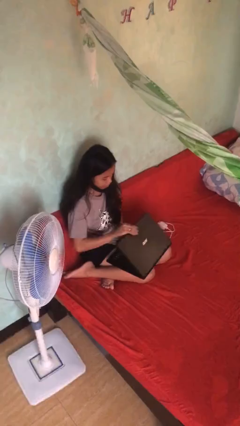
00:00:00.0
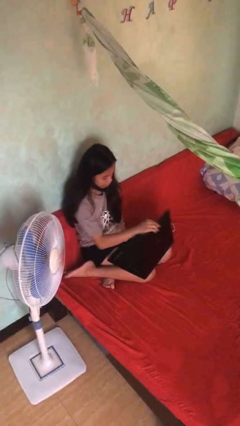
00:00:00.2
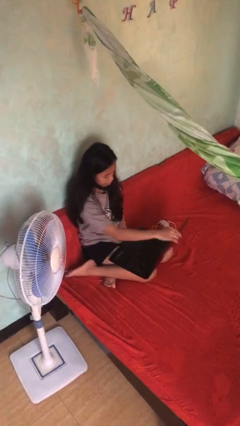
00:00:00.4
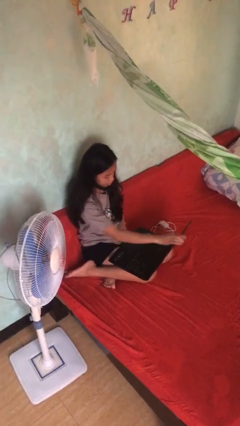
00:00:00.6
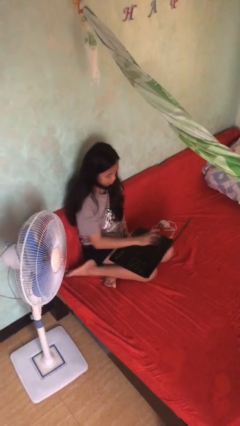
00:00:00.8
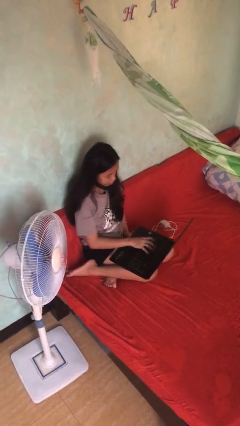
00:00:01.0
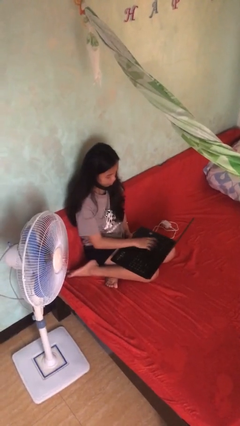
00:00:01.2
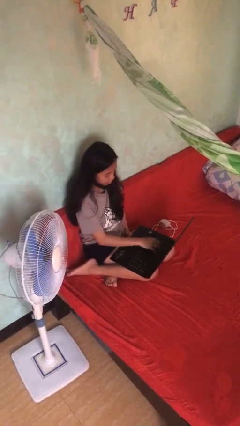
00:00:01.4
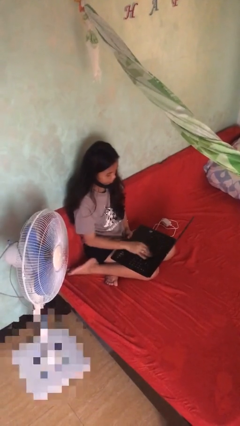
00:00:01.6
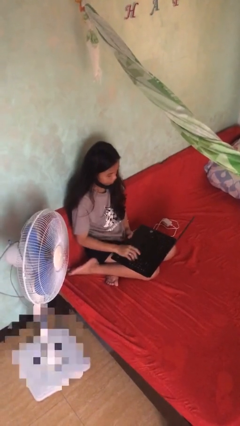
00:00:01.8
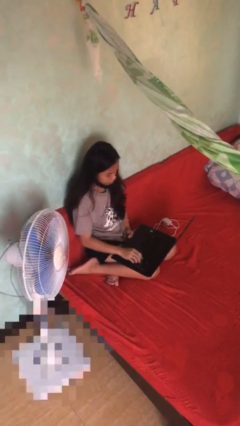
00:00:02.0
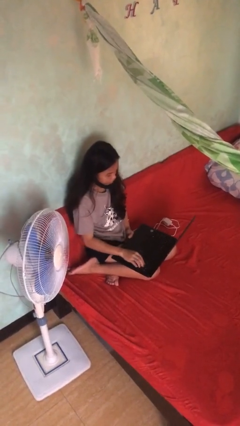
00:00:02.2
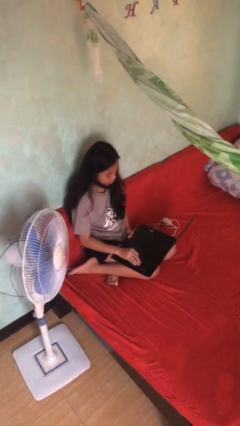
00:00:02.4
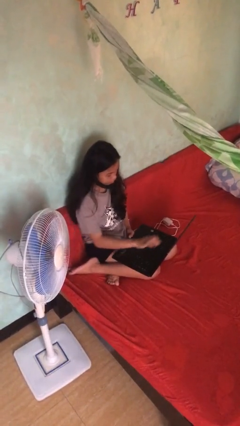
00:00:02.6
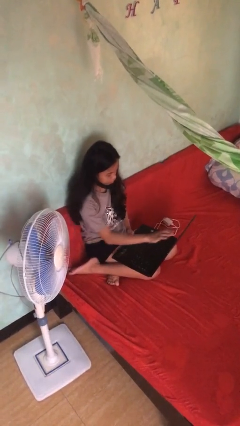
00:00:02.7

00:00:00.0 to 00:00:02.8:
person interacts with laptop

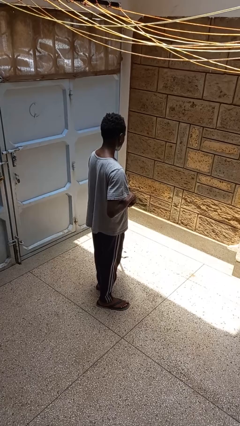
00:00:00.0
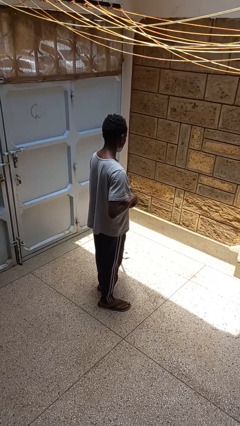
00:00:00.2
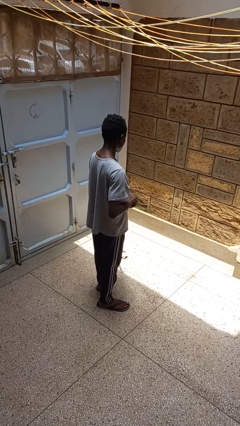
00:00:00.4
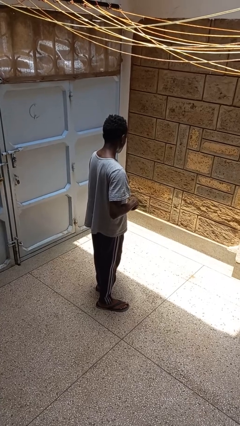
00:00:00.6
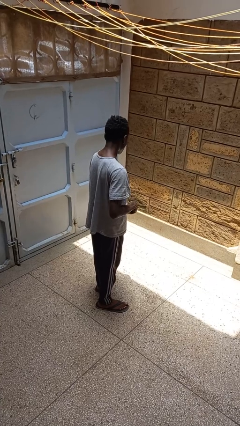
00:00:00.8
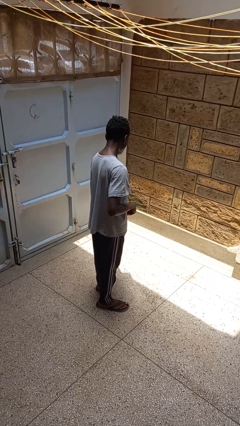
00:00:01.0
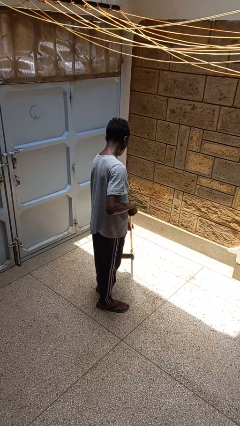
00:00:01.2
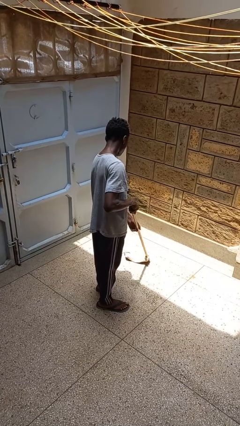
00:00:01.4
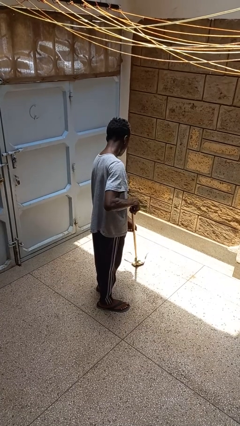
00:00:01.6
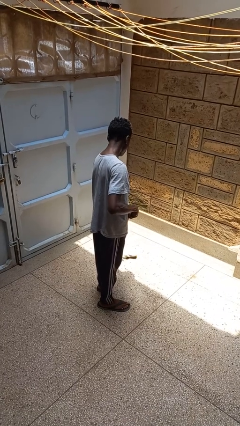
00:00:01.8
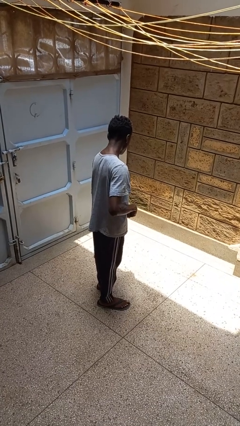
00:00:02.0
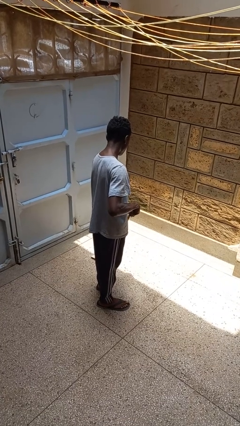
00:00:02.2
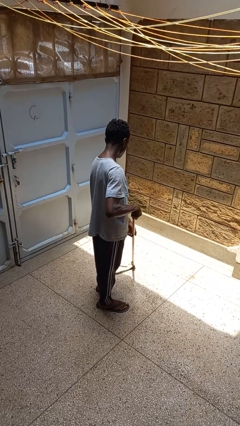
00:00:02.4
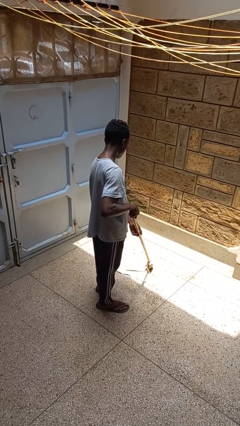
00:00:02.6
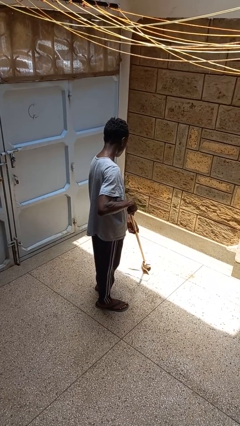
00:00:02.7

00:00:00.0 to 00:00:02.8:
person mops

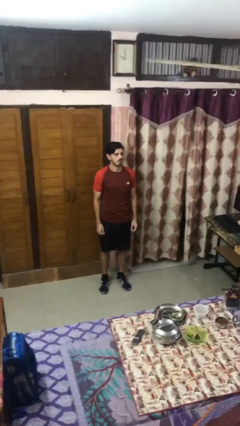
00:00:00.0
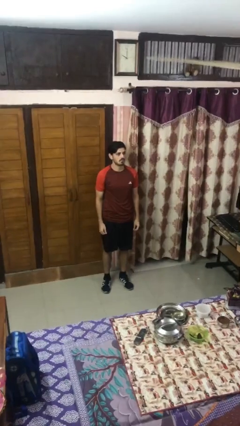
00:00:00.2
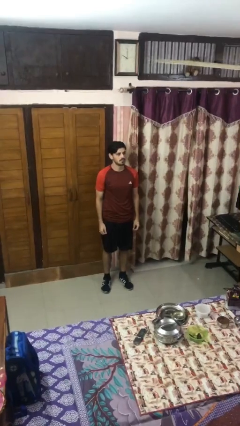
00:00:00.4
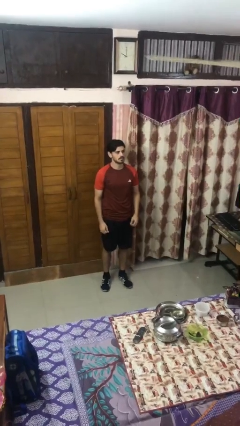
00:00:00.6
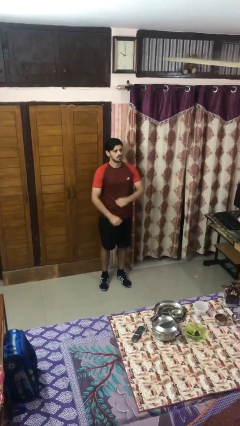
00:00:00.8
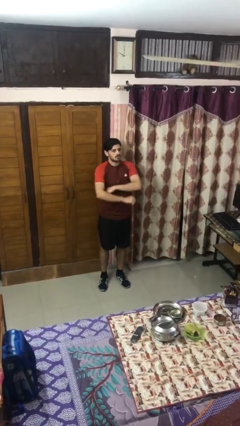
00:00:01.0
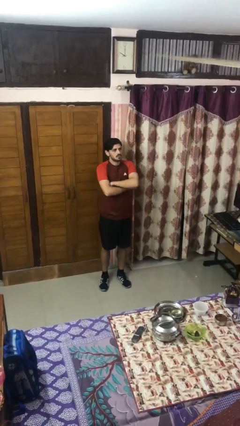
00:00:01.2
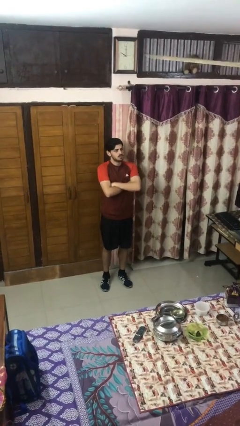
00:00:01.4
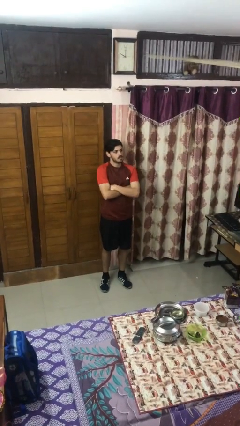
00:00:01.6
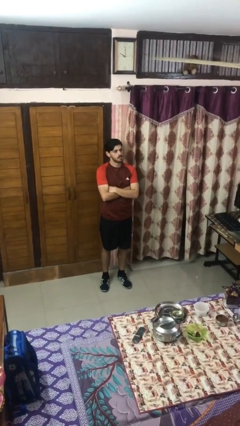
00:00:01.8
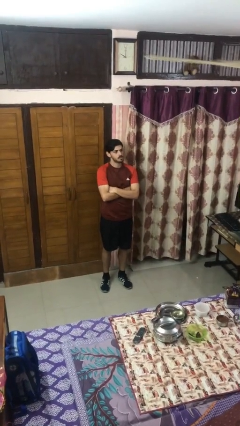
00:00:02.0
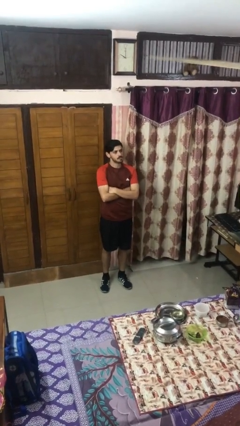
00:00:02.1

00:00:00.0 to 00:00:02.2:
person crosses arms

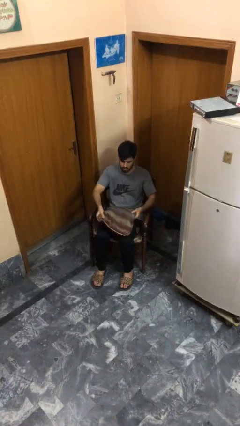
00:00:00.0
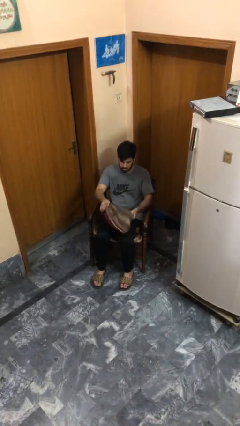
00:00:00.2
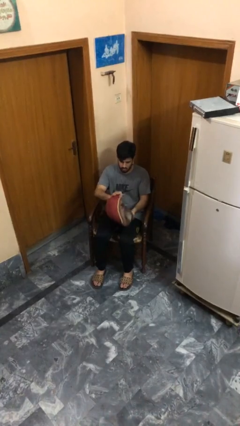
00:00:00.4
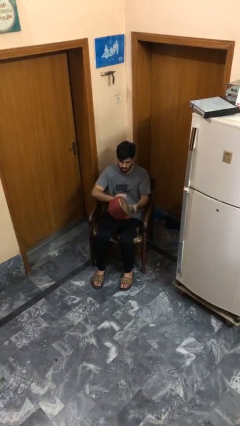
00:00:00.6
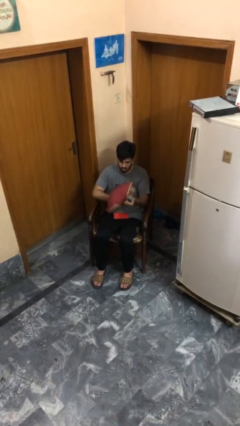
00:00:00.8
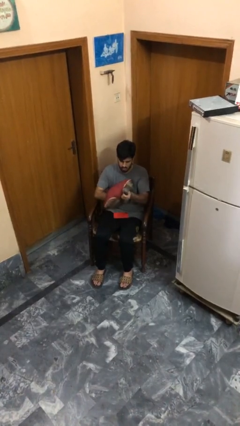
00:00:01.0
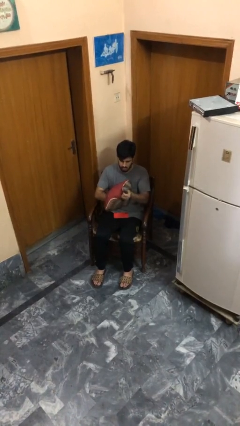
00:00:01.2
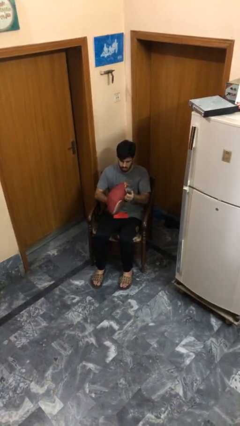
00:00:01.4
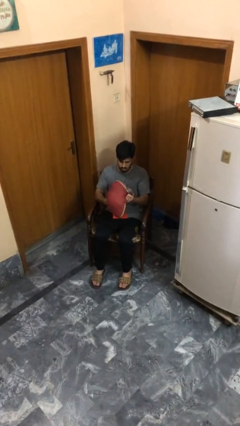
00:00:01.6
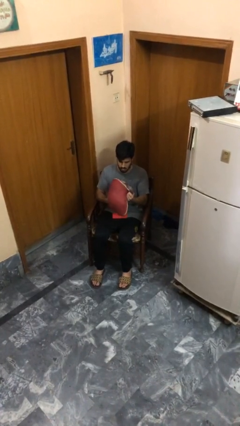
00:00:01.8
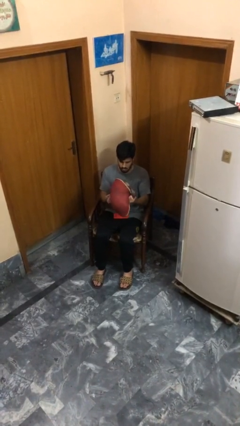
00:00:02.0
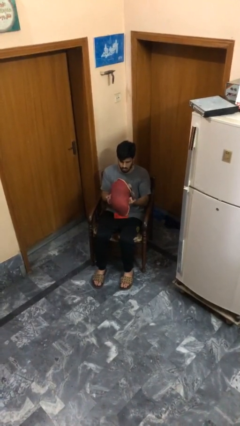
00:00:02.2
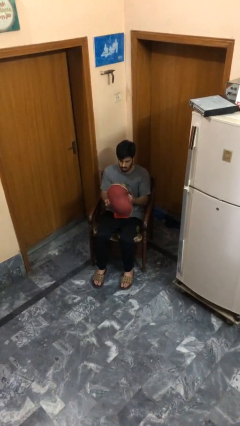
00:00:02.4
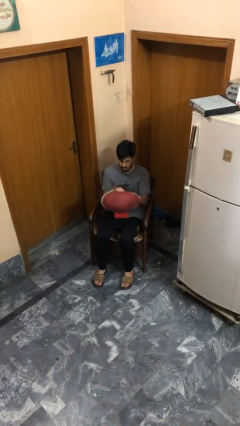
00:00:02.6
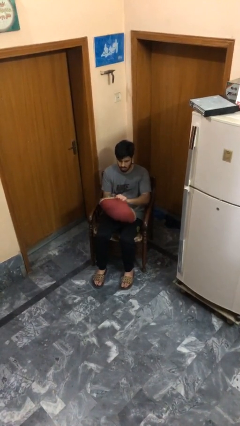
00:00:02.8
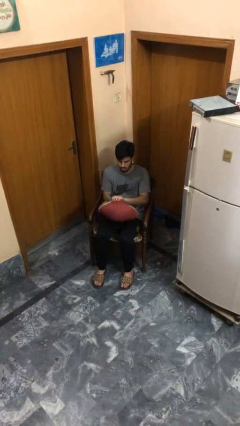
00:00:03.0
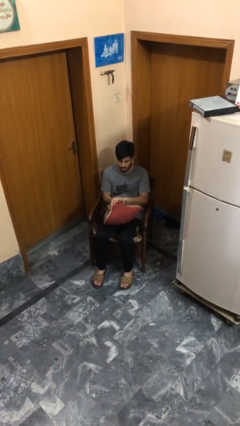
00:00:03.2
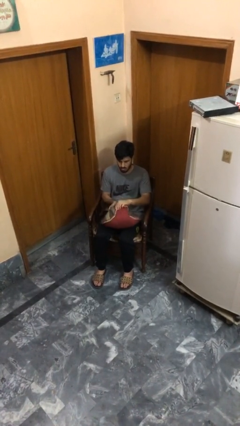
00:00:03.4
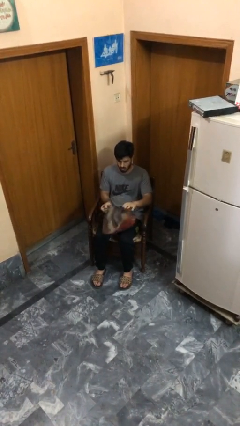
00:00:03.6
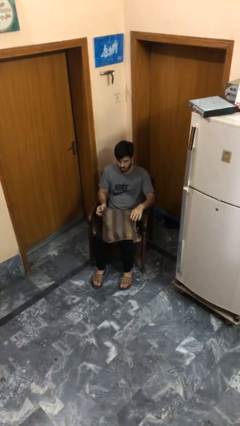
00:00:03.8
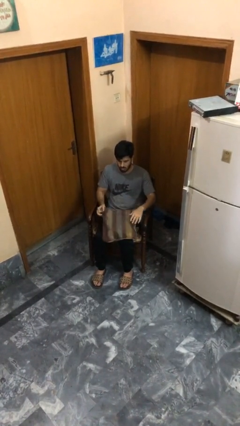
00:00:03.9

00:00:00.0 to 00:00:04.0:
person squeezes object

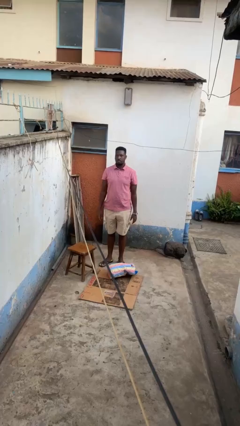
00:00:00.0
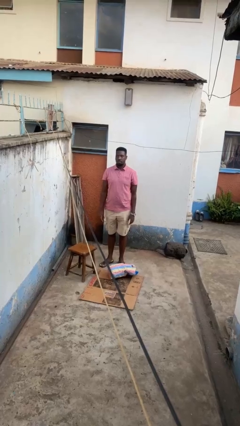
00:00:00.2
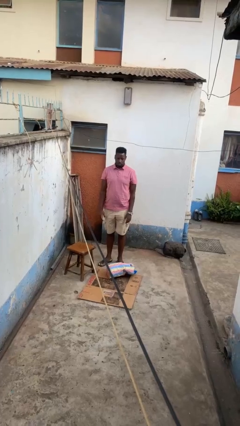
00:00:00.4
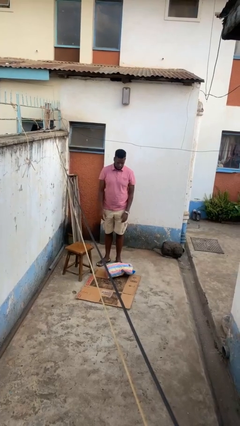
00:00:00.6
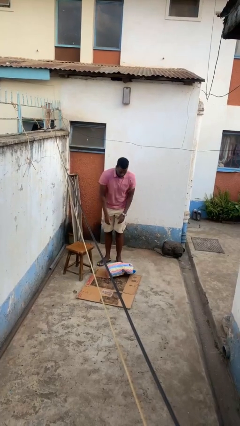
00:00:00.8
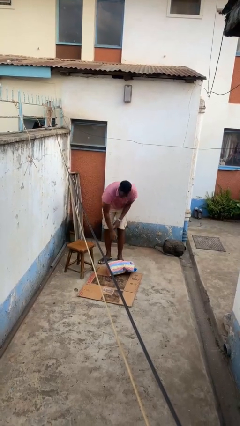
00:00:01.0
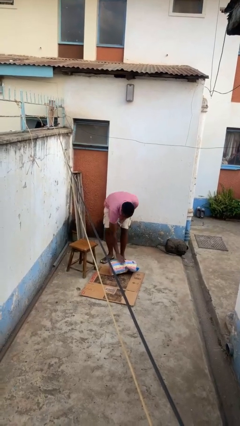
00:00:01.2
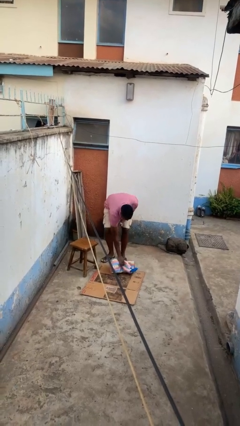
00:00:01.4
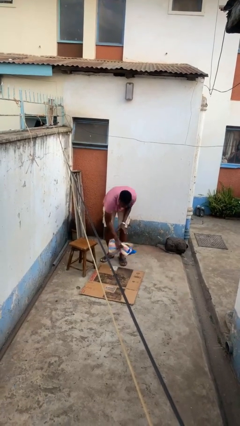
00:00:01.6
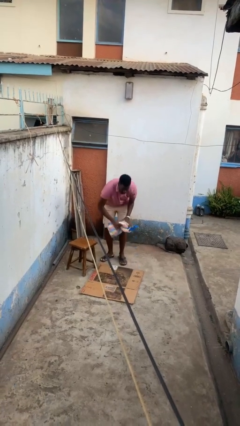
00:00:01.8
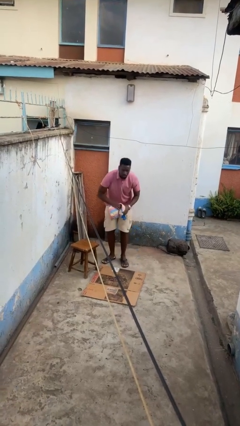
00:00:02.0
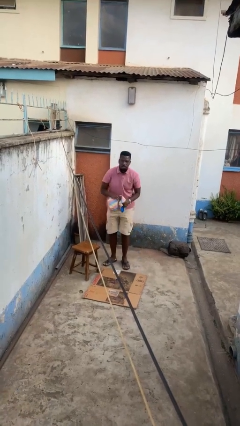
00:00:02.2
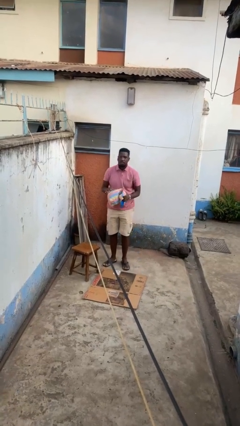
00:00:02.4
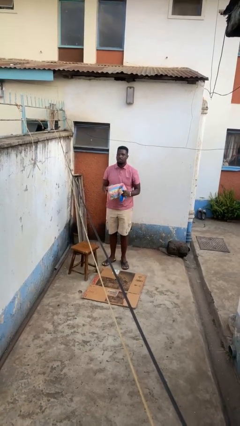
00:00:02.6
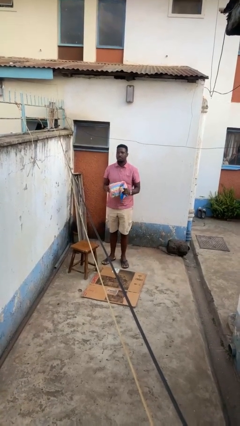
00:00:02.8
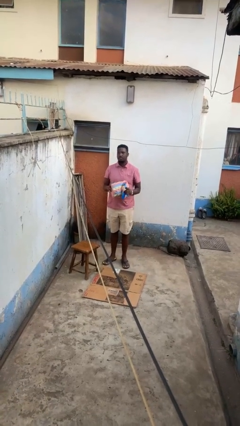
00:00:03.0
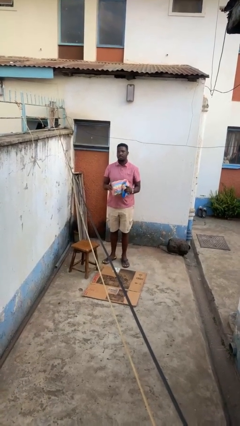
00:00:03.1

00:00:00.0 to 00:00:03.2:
person picks up object from floor

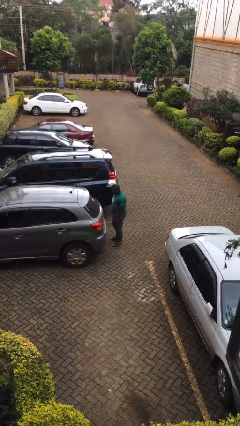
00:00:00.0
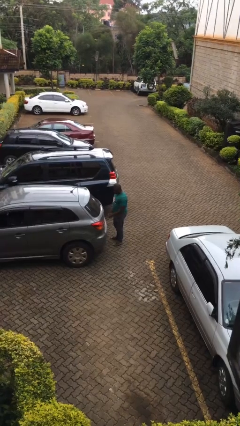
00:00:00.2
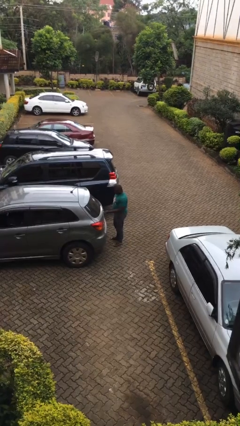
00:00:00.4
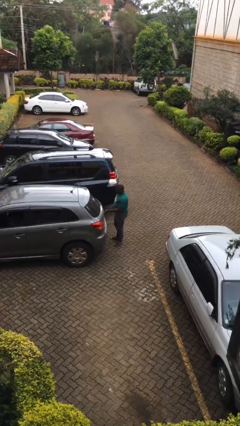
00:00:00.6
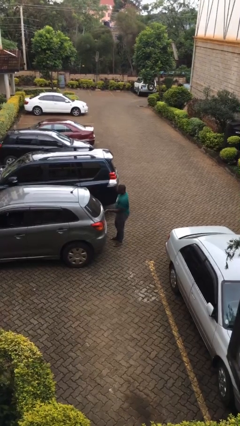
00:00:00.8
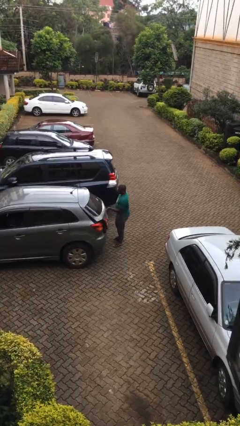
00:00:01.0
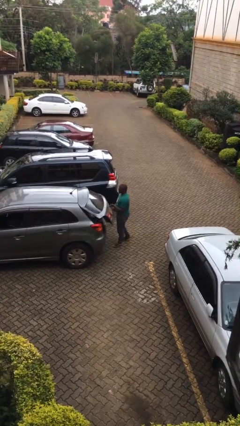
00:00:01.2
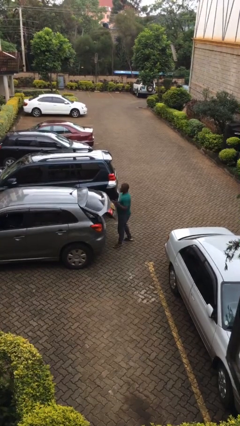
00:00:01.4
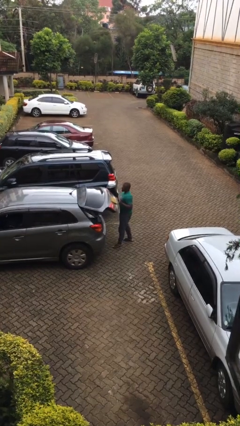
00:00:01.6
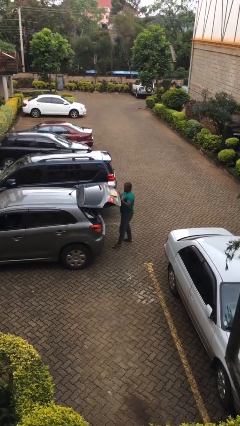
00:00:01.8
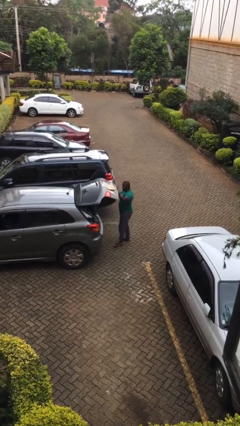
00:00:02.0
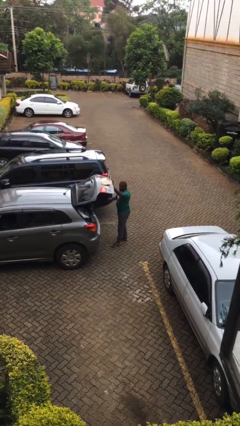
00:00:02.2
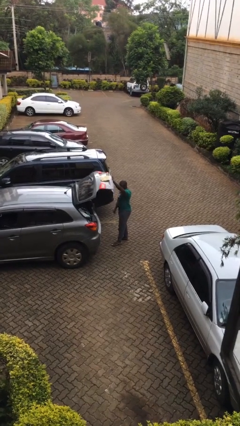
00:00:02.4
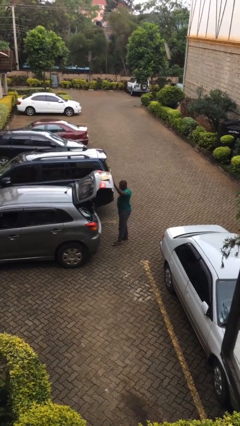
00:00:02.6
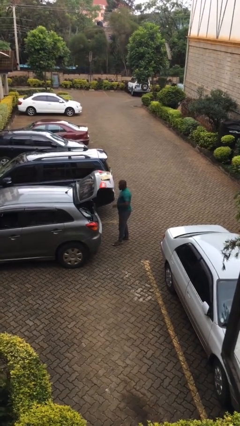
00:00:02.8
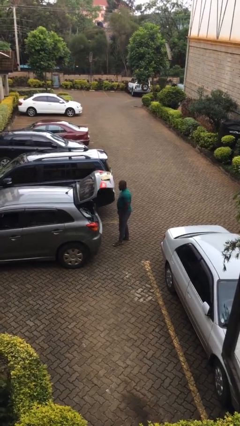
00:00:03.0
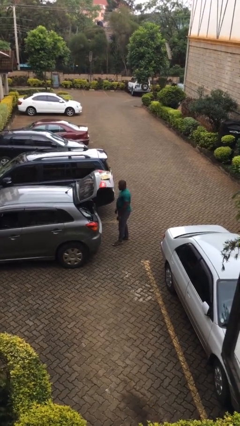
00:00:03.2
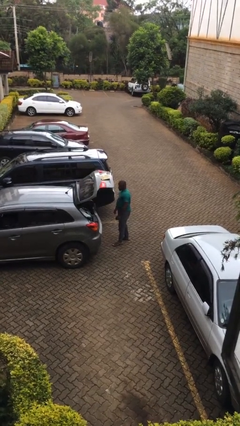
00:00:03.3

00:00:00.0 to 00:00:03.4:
person opens car trunk
